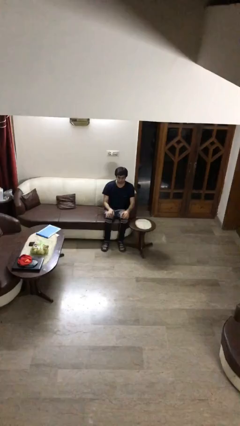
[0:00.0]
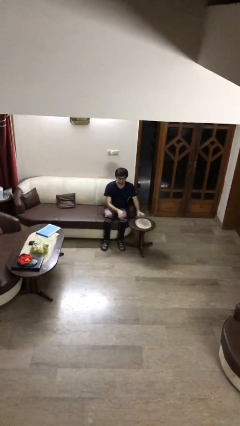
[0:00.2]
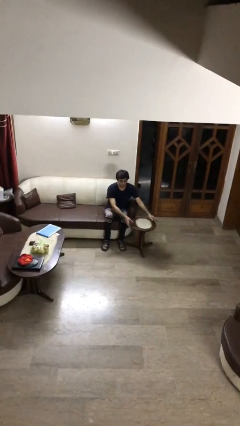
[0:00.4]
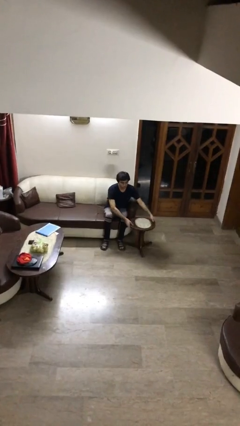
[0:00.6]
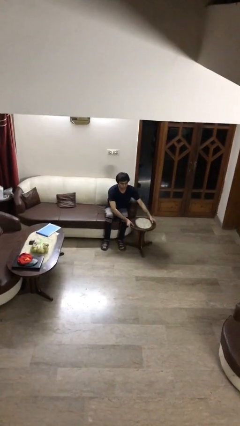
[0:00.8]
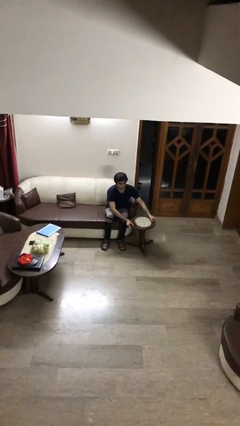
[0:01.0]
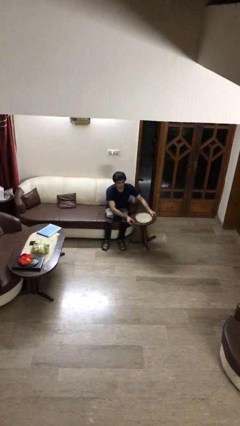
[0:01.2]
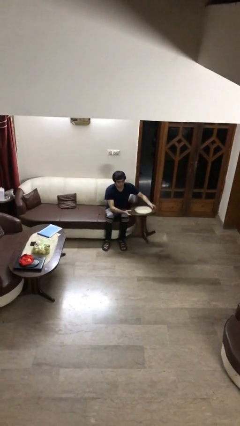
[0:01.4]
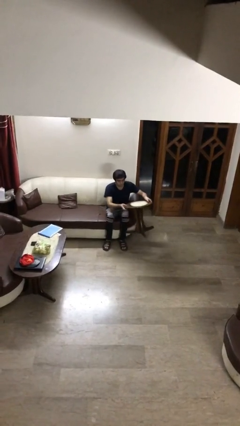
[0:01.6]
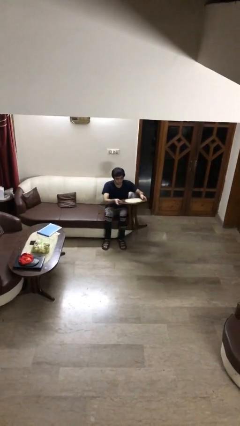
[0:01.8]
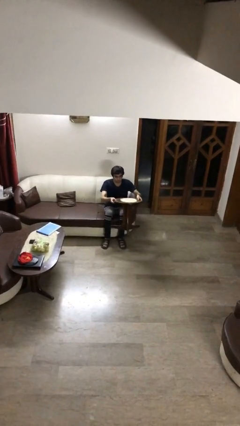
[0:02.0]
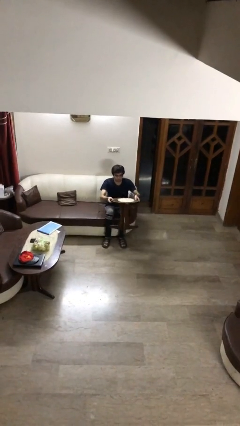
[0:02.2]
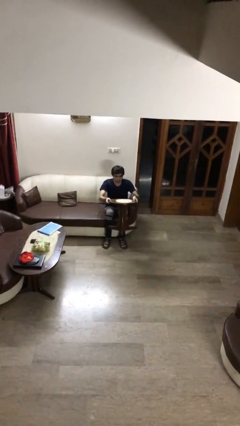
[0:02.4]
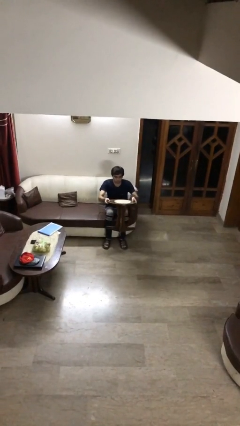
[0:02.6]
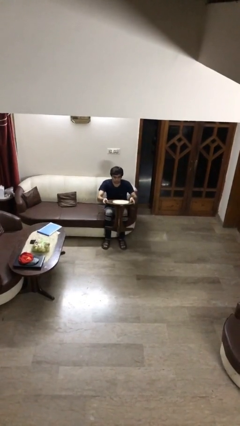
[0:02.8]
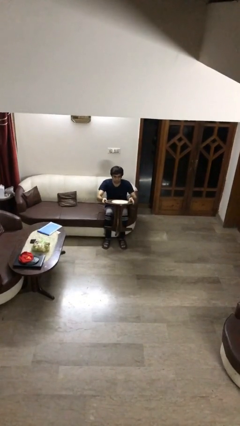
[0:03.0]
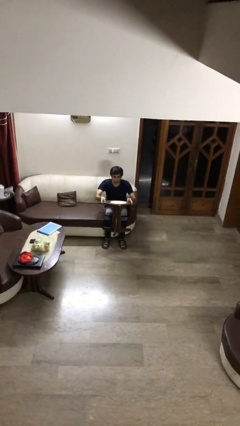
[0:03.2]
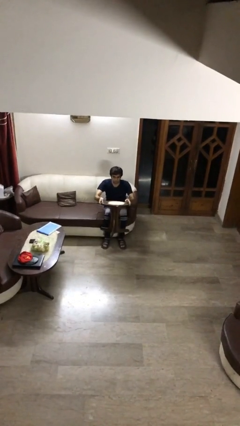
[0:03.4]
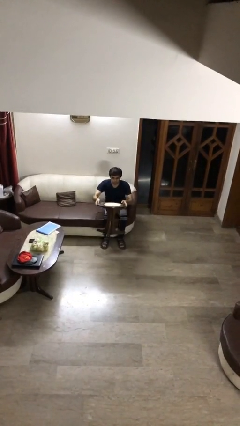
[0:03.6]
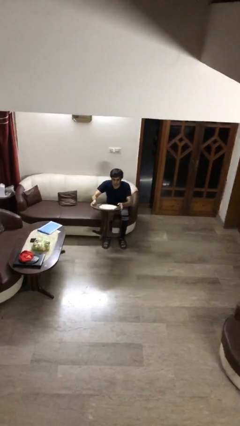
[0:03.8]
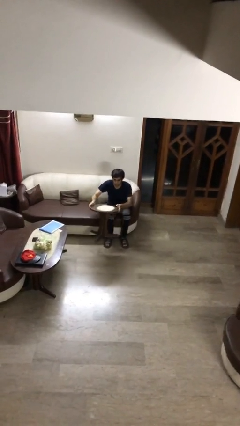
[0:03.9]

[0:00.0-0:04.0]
person picks up object from floor

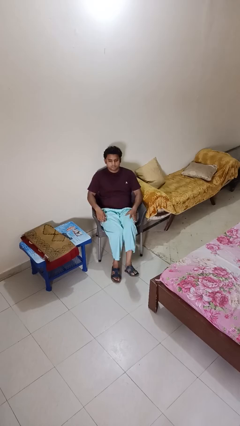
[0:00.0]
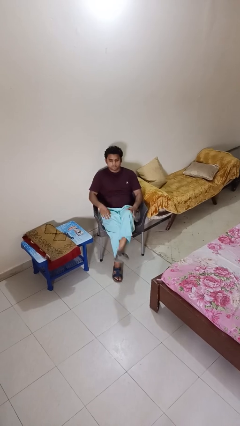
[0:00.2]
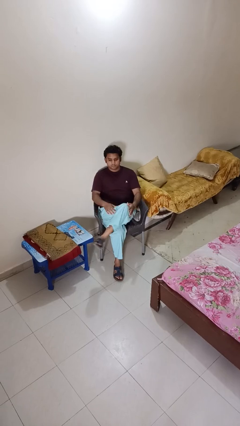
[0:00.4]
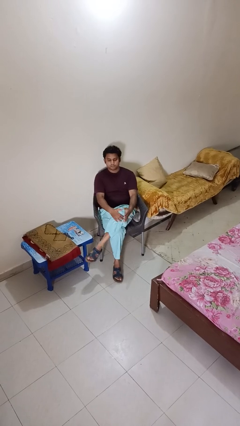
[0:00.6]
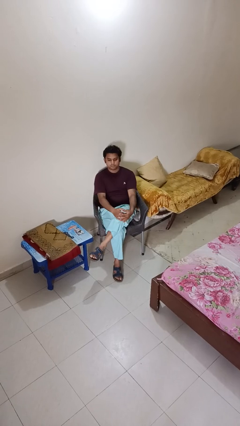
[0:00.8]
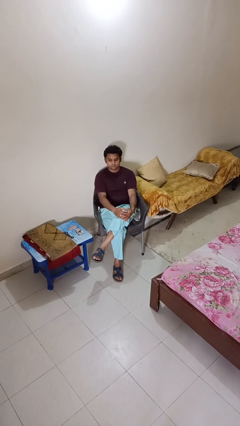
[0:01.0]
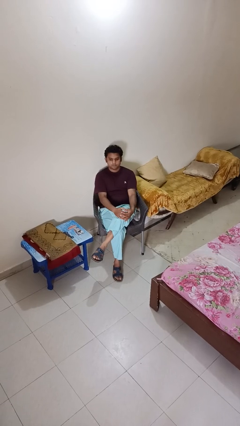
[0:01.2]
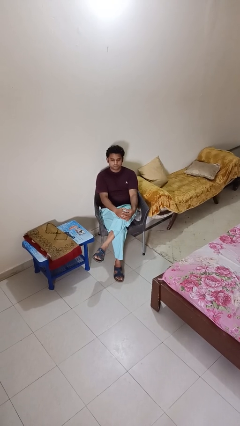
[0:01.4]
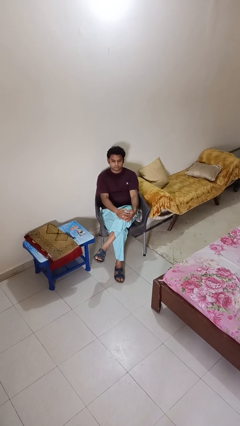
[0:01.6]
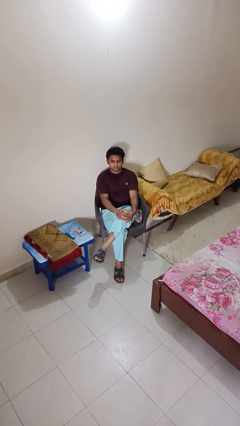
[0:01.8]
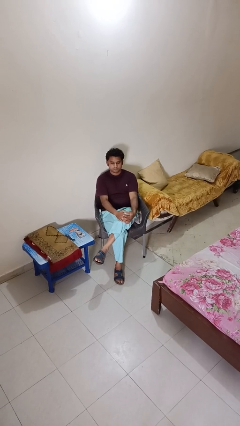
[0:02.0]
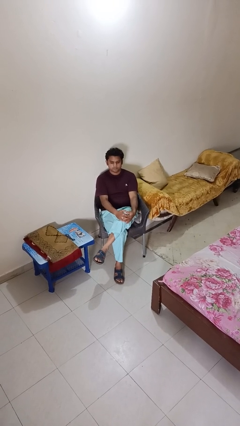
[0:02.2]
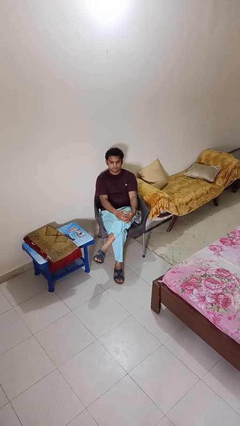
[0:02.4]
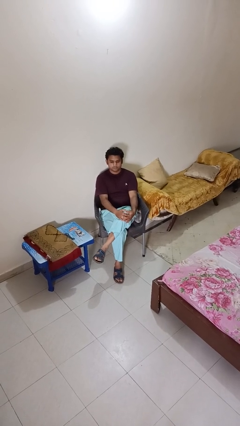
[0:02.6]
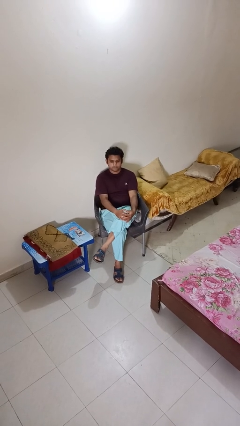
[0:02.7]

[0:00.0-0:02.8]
person crosses legs

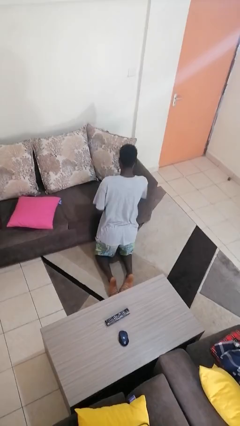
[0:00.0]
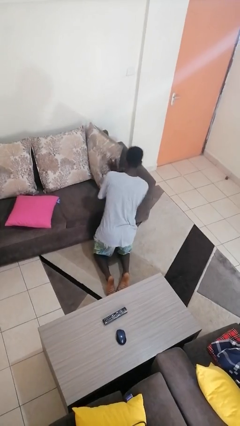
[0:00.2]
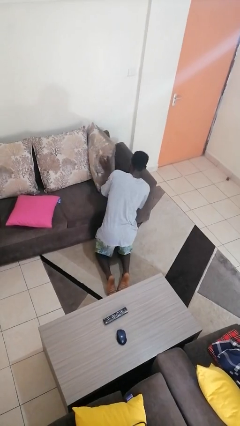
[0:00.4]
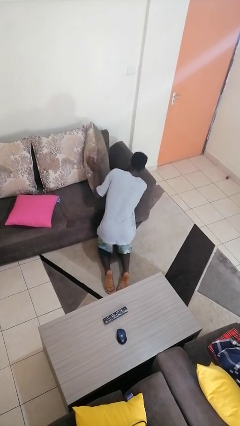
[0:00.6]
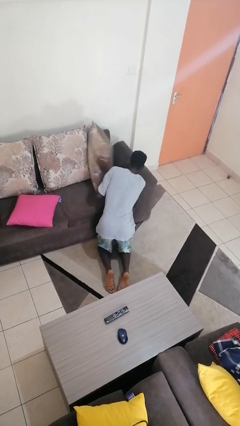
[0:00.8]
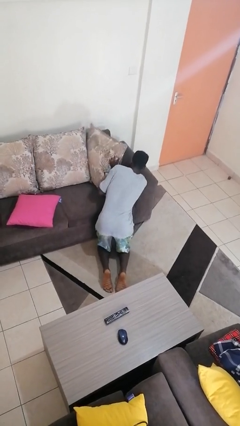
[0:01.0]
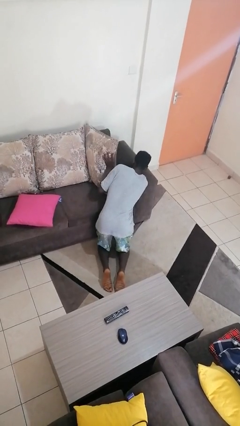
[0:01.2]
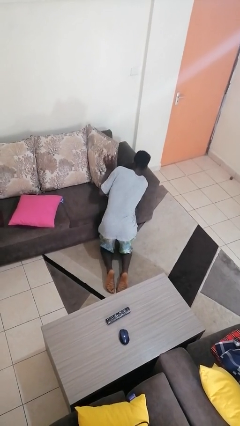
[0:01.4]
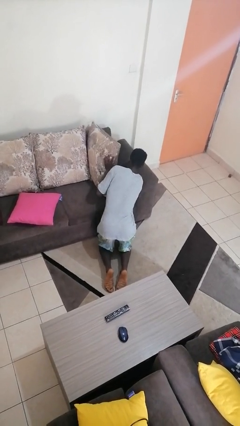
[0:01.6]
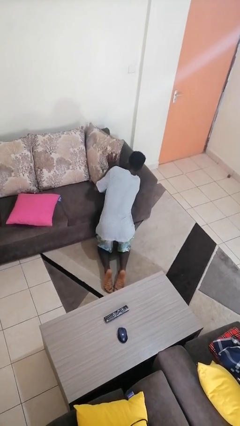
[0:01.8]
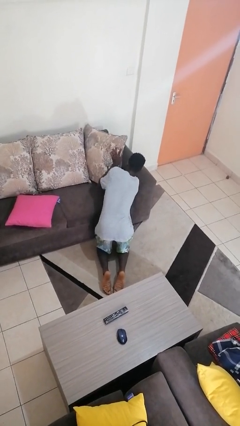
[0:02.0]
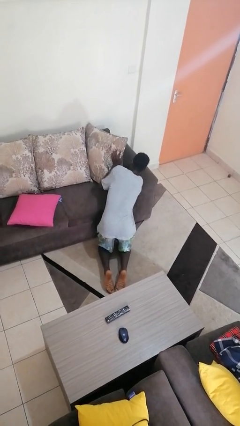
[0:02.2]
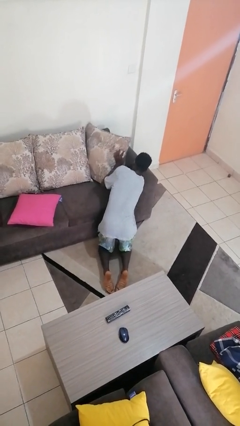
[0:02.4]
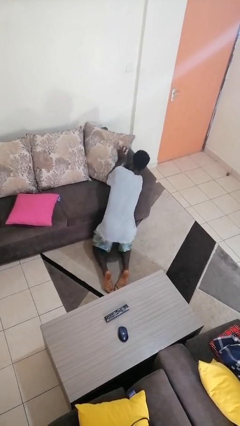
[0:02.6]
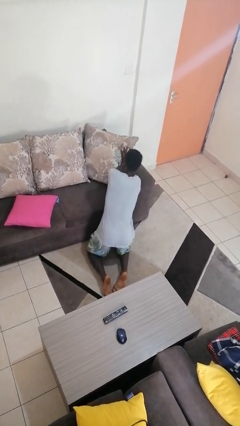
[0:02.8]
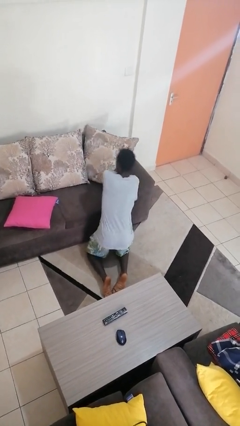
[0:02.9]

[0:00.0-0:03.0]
person searches in couch

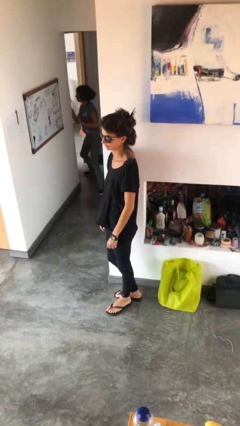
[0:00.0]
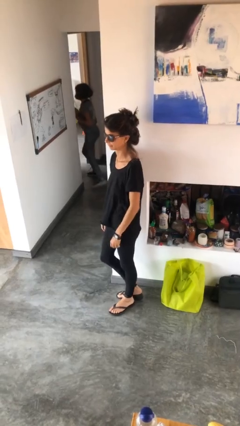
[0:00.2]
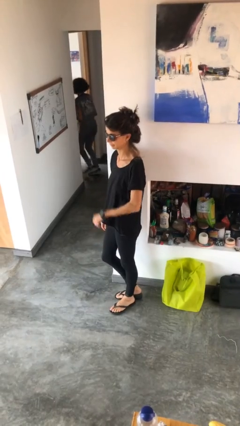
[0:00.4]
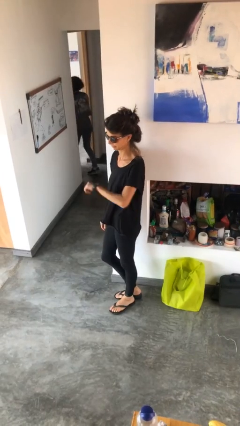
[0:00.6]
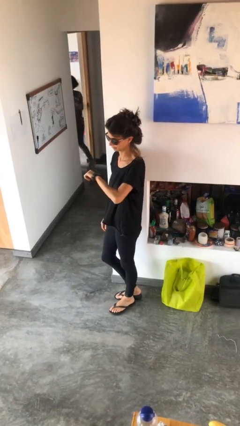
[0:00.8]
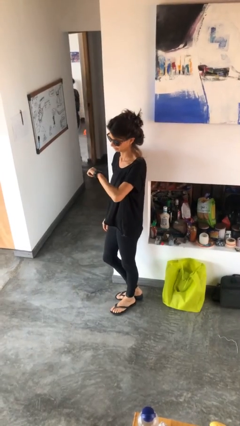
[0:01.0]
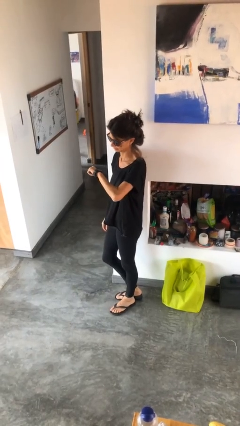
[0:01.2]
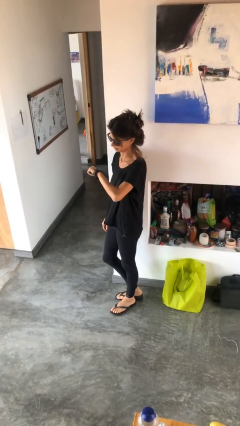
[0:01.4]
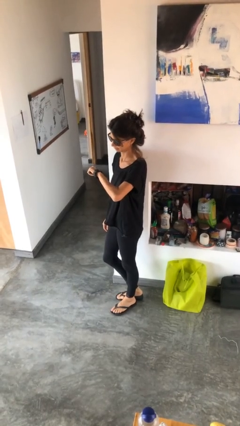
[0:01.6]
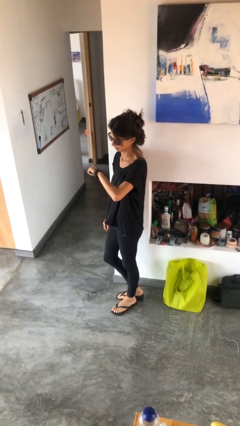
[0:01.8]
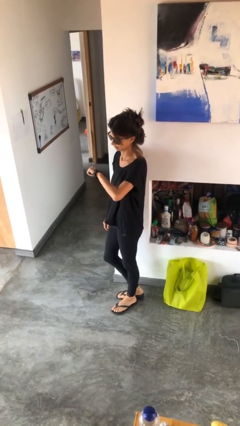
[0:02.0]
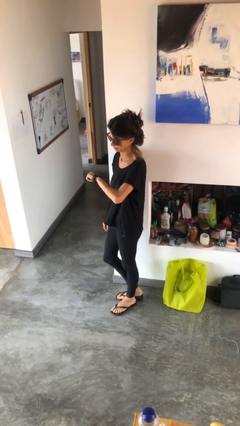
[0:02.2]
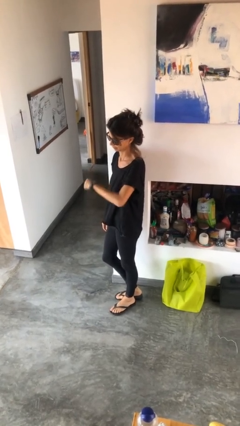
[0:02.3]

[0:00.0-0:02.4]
person looks at wristwatch

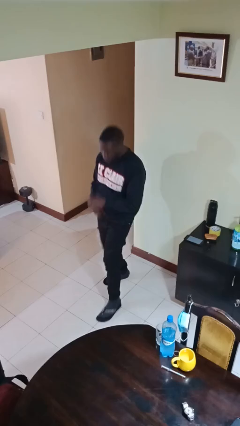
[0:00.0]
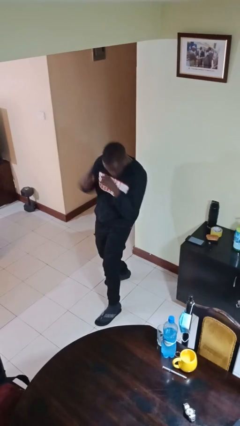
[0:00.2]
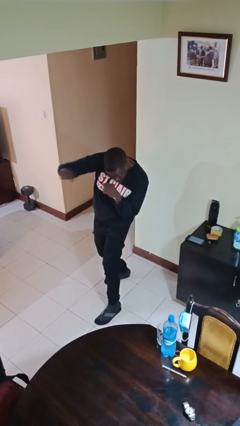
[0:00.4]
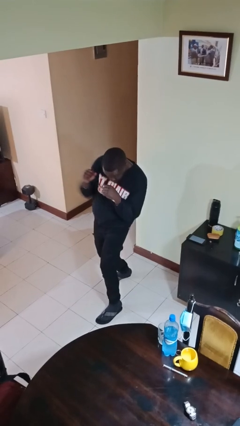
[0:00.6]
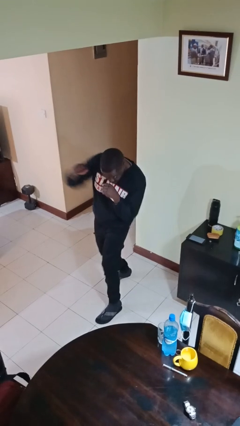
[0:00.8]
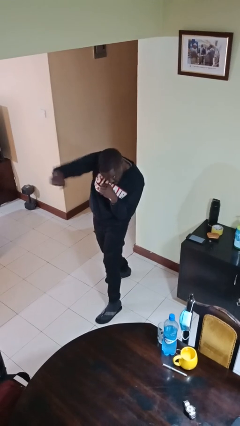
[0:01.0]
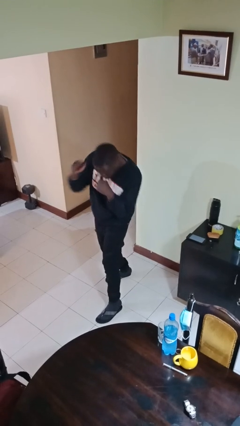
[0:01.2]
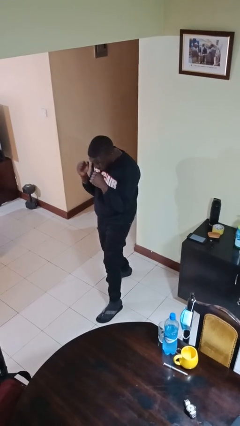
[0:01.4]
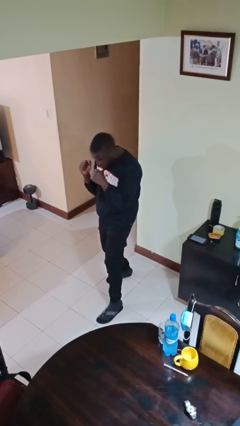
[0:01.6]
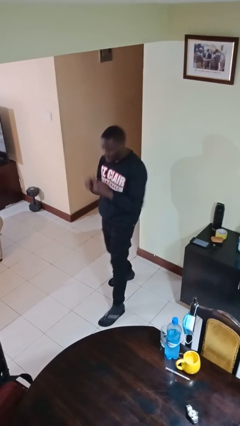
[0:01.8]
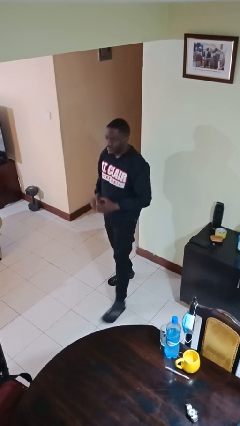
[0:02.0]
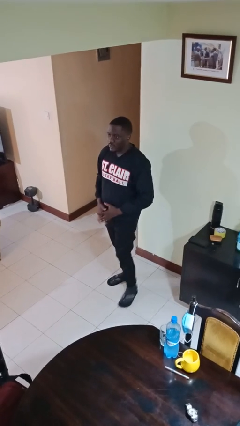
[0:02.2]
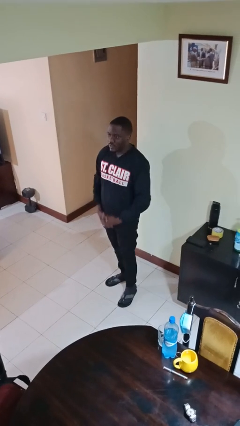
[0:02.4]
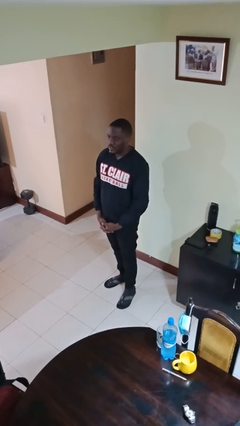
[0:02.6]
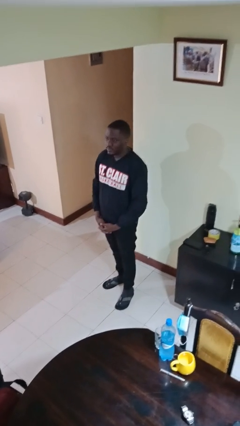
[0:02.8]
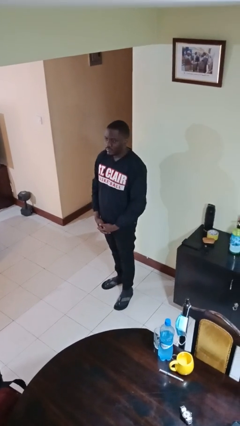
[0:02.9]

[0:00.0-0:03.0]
person punches

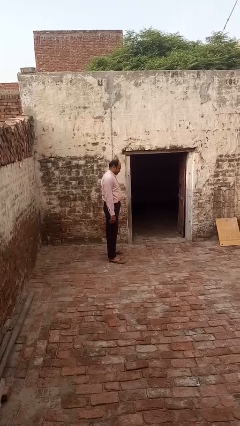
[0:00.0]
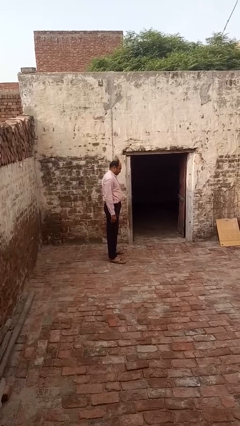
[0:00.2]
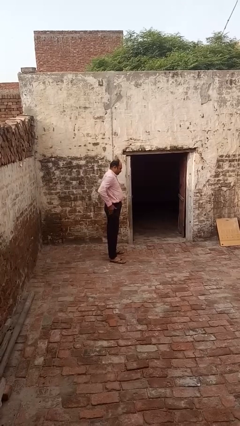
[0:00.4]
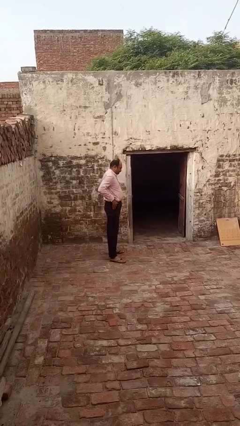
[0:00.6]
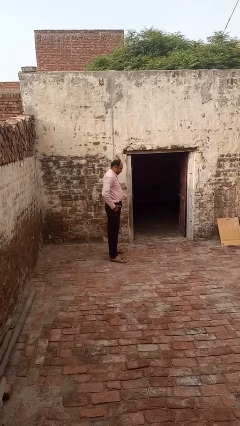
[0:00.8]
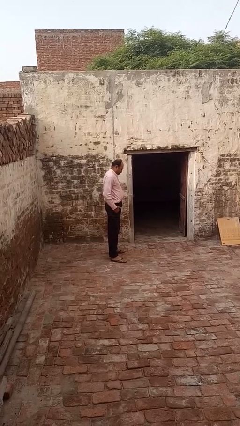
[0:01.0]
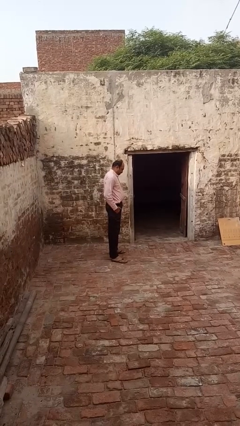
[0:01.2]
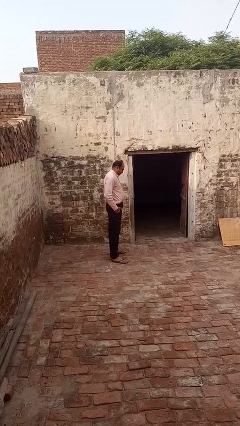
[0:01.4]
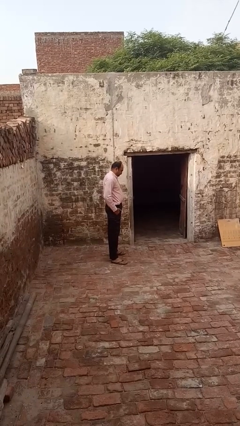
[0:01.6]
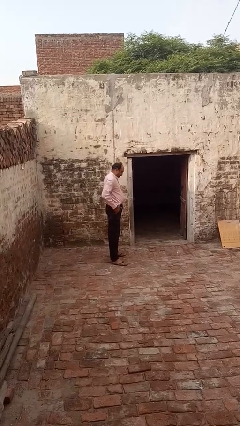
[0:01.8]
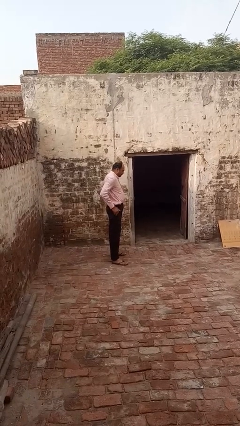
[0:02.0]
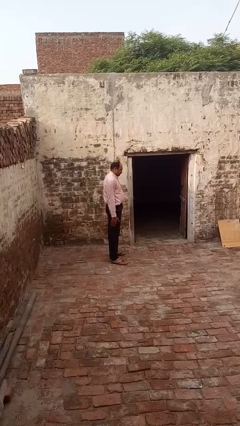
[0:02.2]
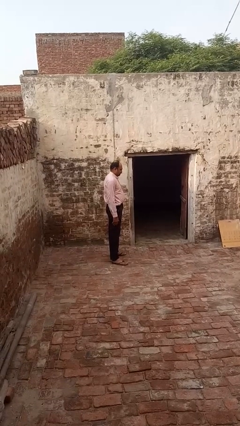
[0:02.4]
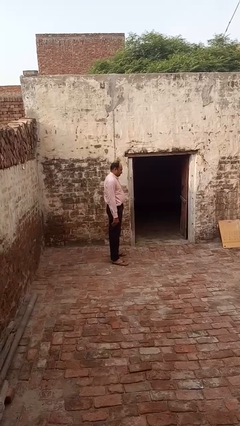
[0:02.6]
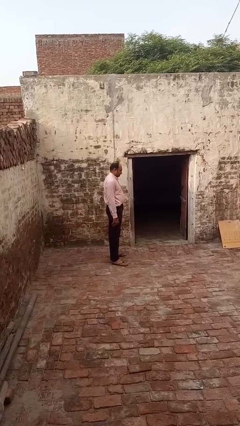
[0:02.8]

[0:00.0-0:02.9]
person puts hands in back pockets
